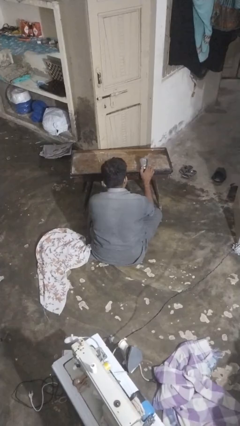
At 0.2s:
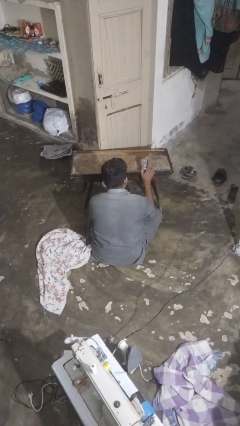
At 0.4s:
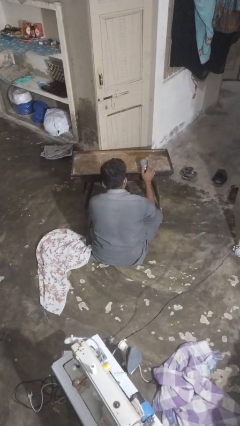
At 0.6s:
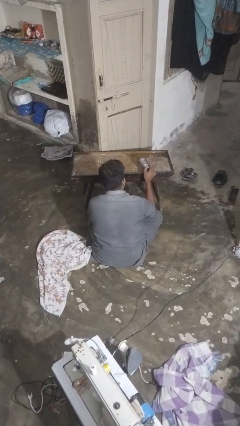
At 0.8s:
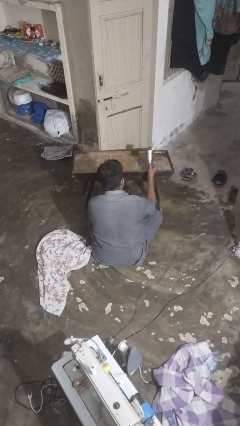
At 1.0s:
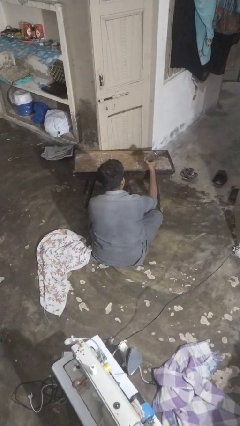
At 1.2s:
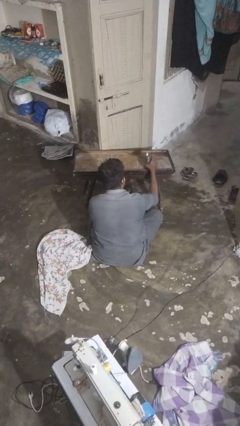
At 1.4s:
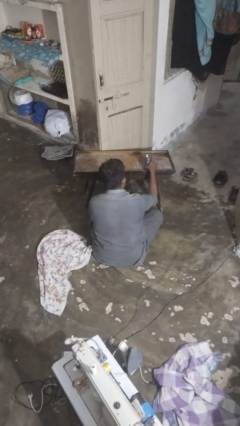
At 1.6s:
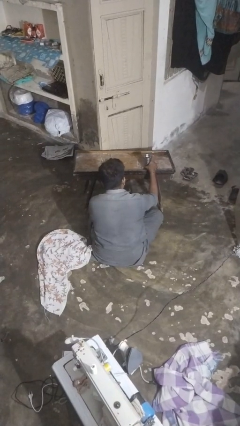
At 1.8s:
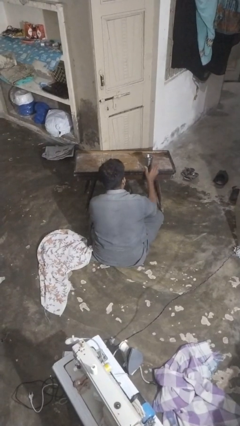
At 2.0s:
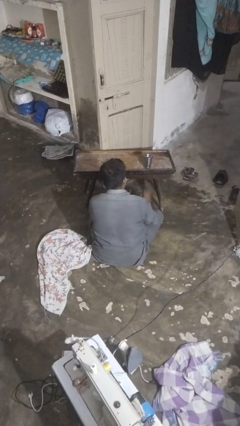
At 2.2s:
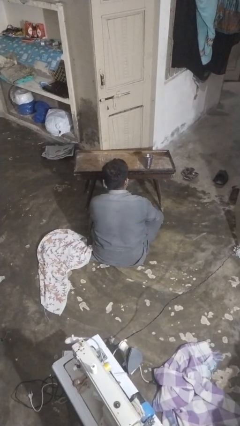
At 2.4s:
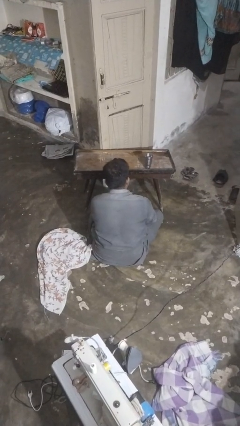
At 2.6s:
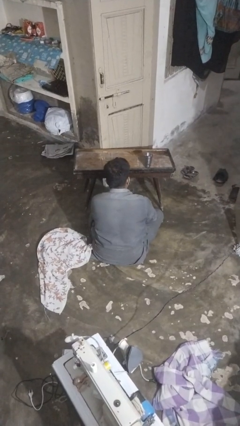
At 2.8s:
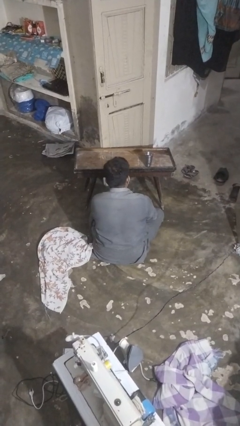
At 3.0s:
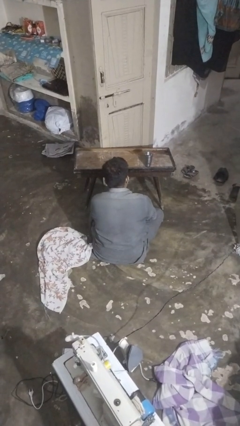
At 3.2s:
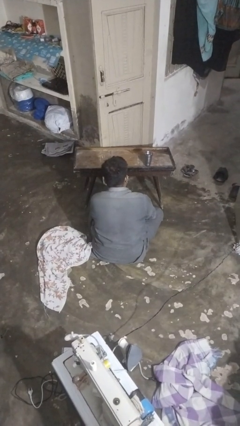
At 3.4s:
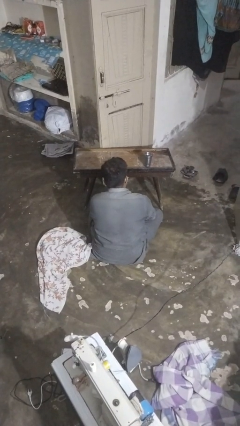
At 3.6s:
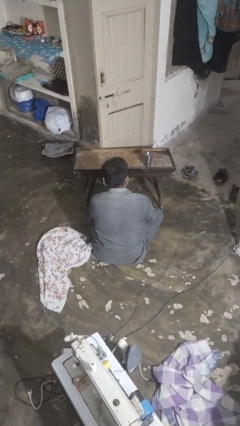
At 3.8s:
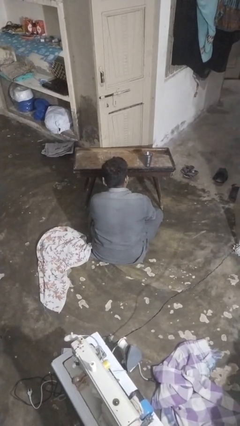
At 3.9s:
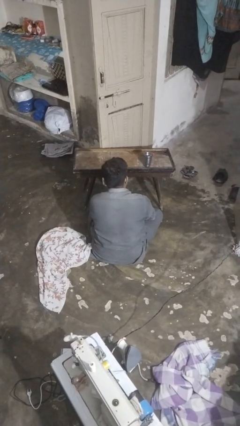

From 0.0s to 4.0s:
person sets upright glass

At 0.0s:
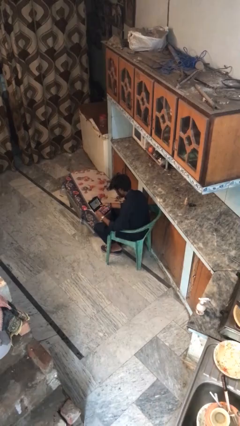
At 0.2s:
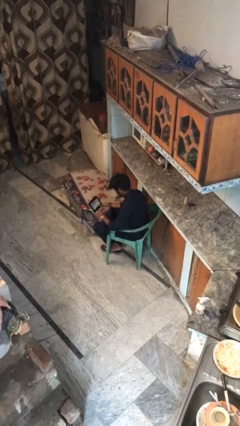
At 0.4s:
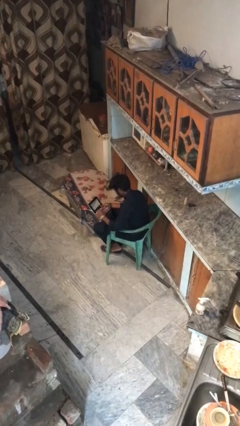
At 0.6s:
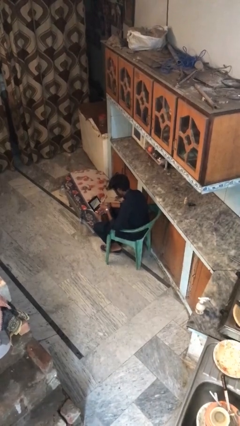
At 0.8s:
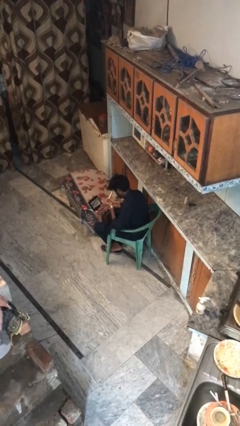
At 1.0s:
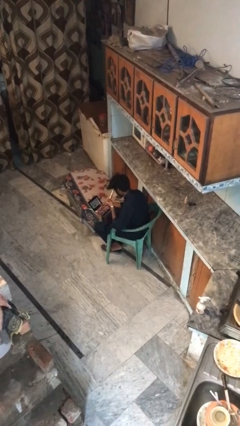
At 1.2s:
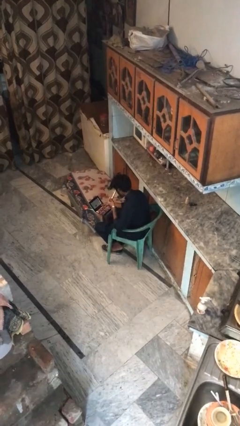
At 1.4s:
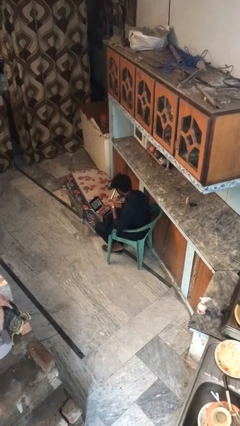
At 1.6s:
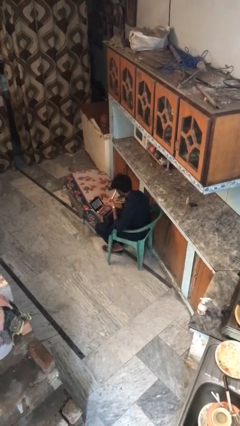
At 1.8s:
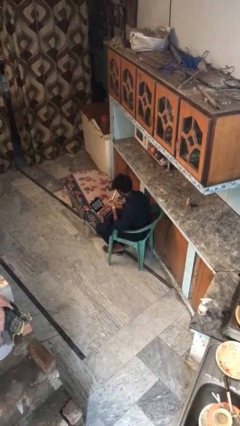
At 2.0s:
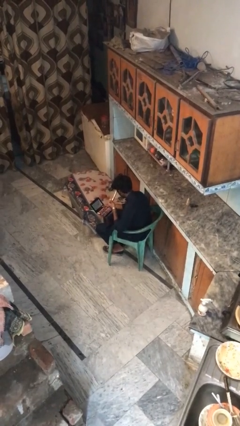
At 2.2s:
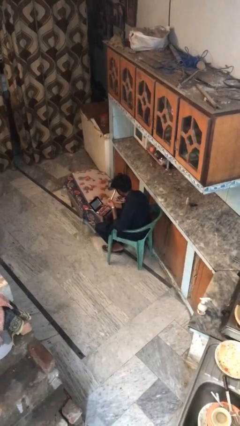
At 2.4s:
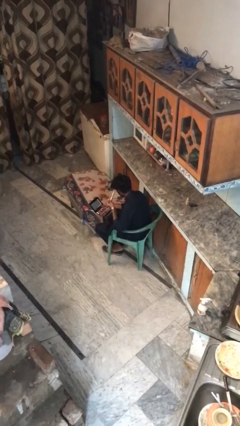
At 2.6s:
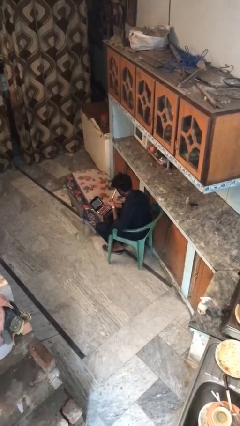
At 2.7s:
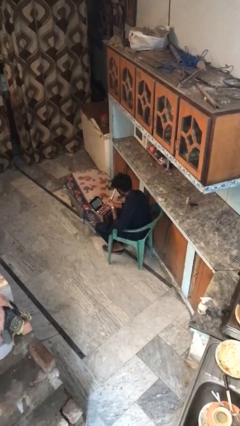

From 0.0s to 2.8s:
person applies eye makeup

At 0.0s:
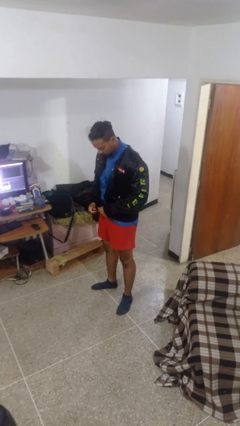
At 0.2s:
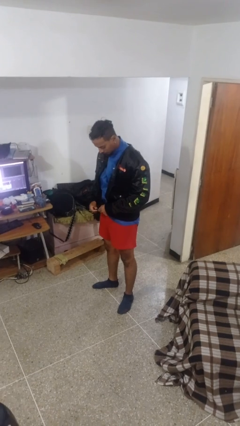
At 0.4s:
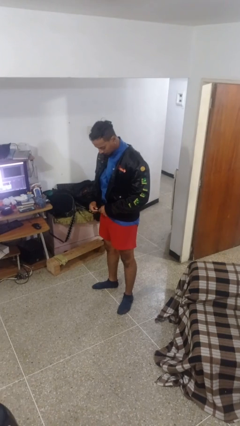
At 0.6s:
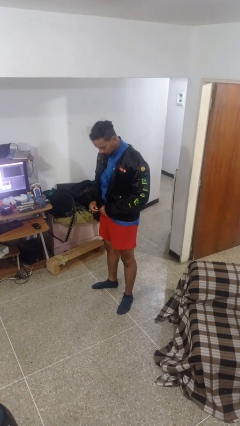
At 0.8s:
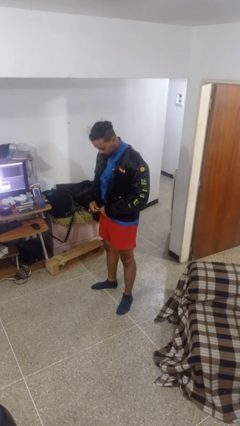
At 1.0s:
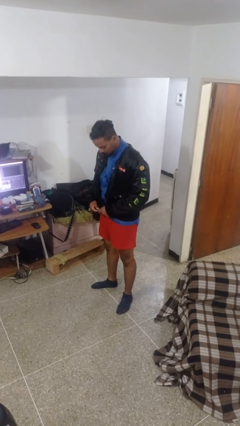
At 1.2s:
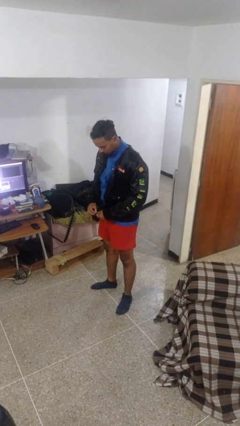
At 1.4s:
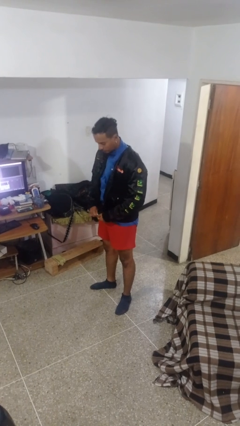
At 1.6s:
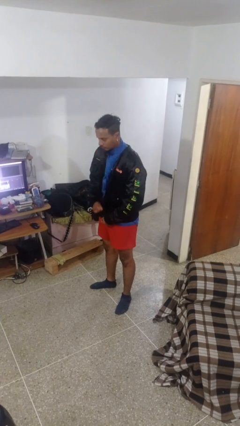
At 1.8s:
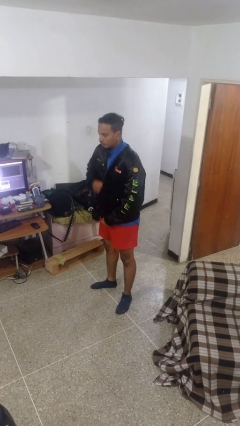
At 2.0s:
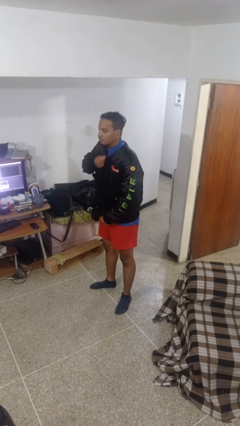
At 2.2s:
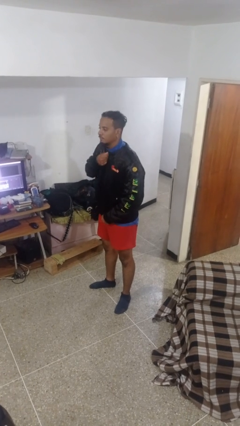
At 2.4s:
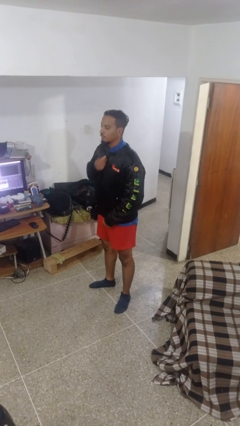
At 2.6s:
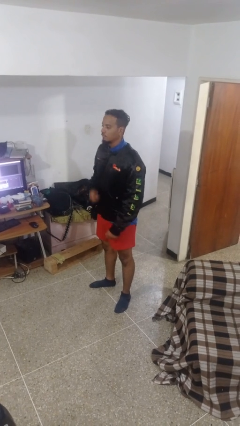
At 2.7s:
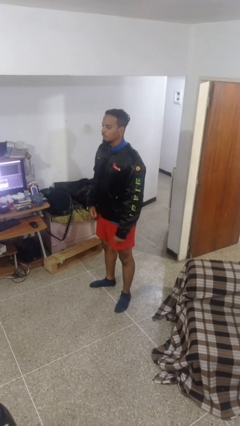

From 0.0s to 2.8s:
person zips up jacket

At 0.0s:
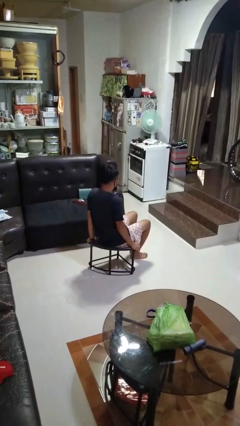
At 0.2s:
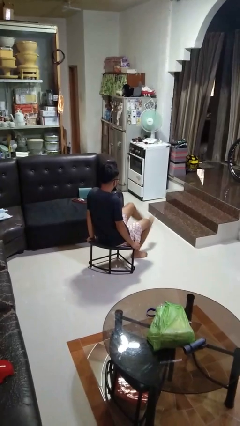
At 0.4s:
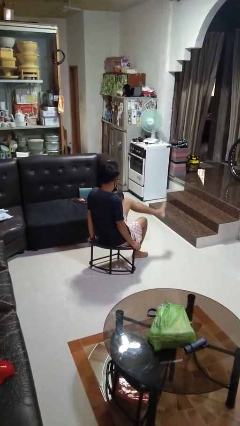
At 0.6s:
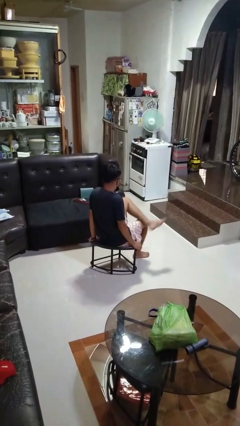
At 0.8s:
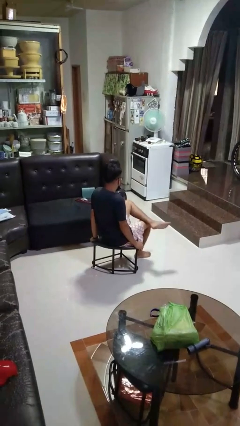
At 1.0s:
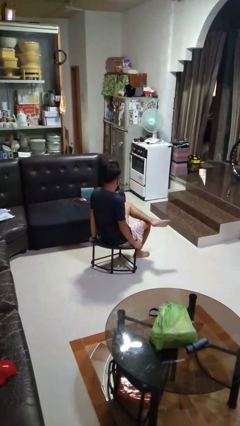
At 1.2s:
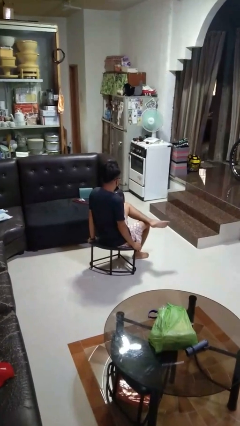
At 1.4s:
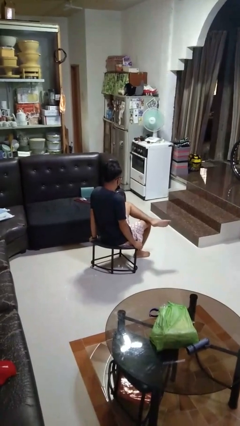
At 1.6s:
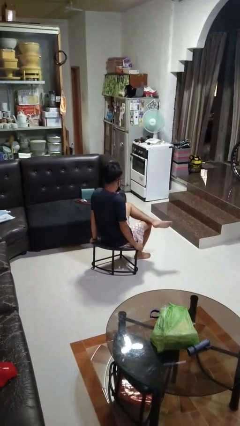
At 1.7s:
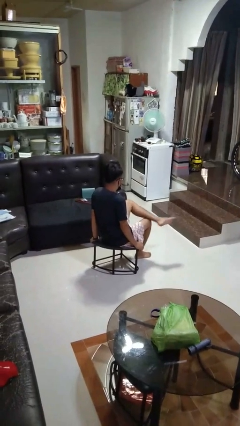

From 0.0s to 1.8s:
person crosses legs

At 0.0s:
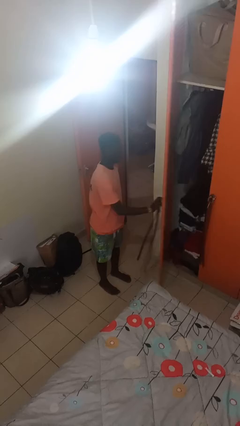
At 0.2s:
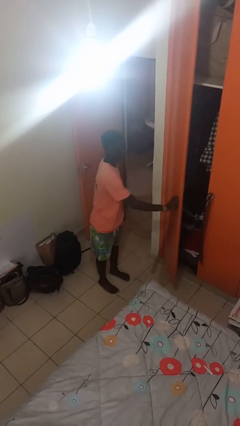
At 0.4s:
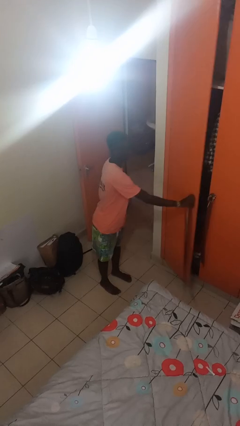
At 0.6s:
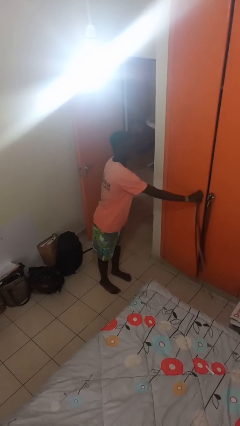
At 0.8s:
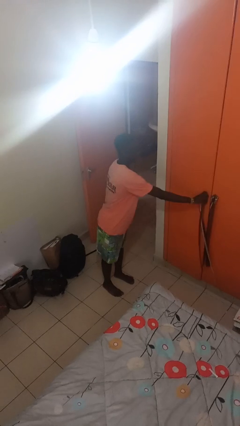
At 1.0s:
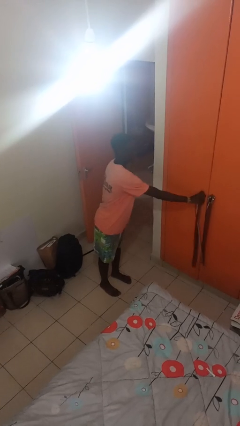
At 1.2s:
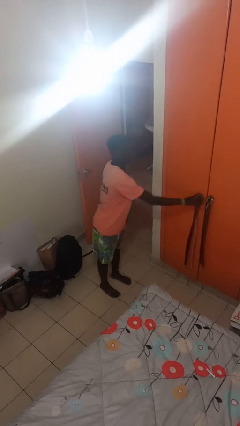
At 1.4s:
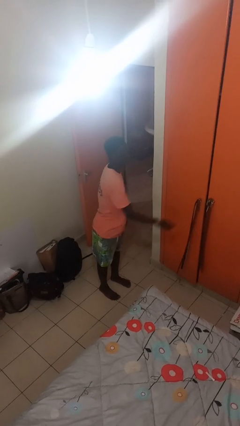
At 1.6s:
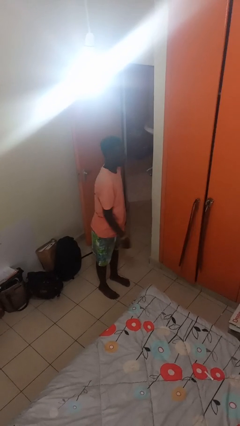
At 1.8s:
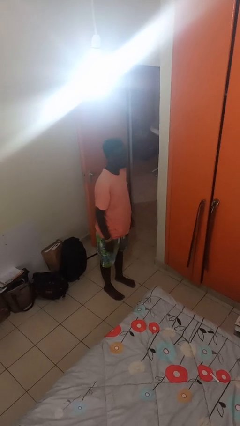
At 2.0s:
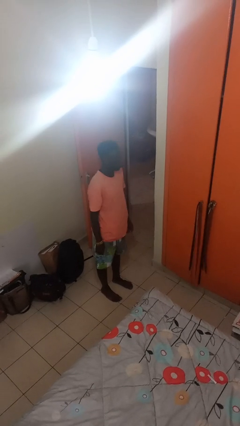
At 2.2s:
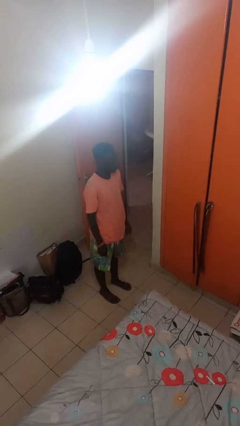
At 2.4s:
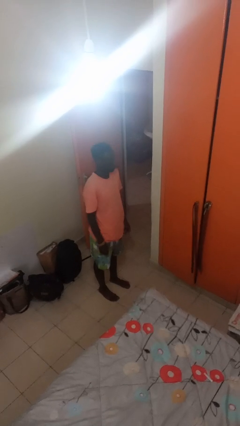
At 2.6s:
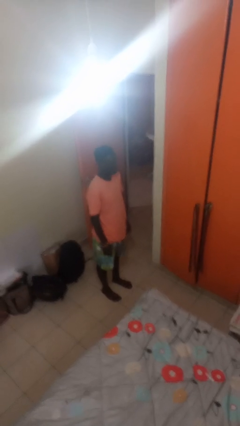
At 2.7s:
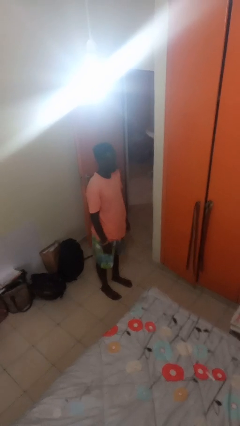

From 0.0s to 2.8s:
person closes closet door

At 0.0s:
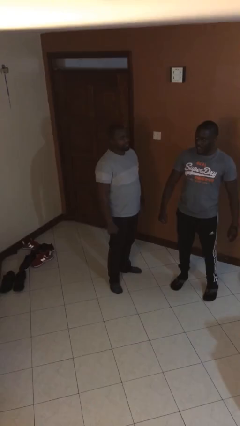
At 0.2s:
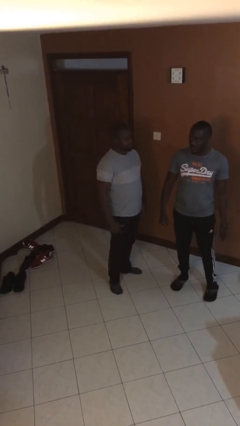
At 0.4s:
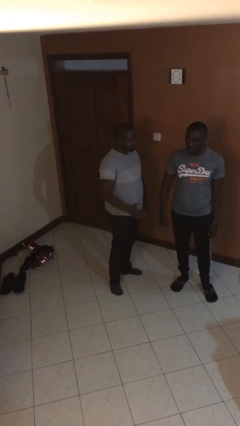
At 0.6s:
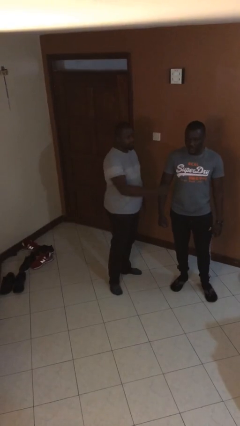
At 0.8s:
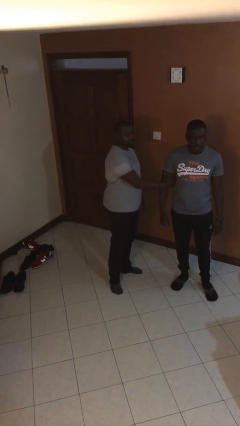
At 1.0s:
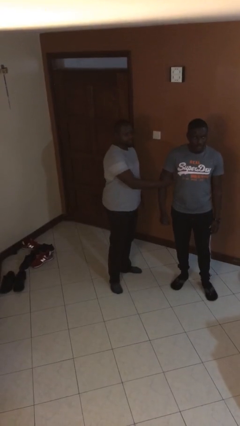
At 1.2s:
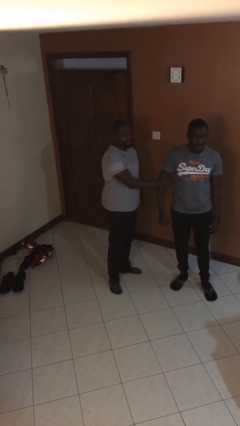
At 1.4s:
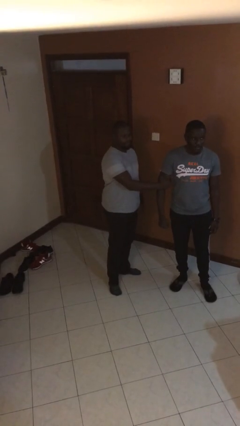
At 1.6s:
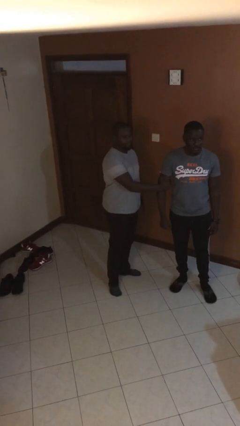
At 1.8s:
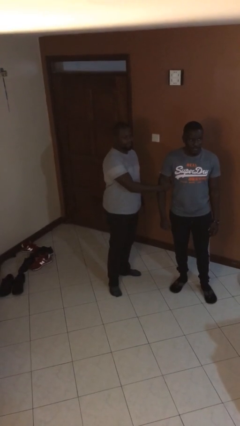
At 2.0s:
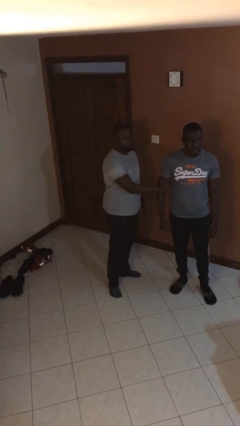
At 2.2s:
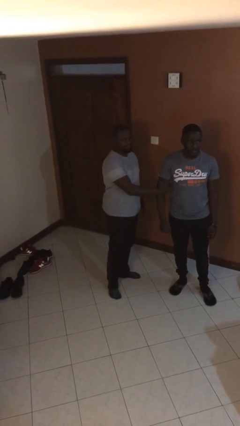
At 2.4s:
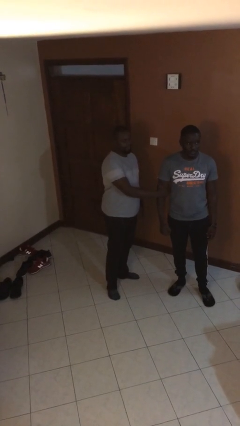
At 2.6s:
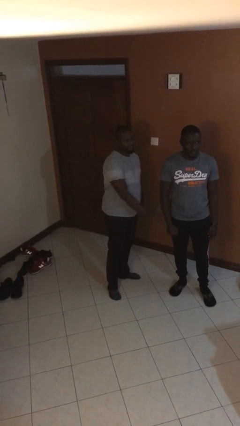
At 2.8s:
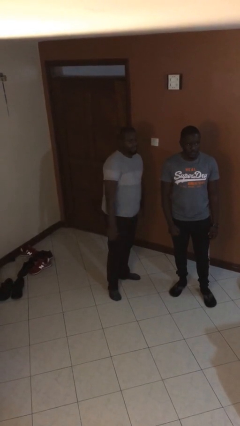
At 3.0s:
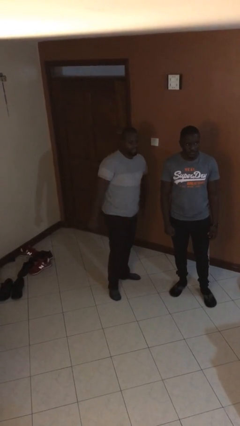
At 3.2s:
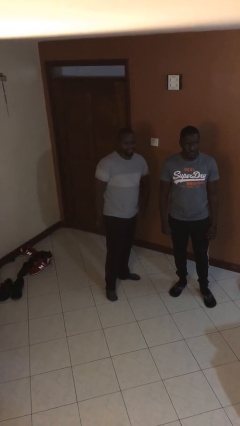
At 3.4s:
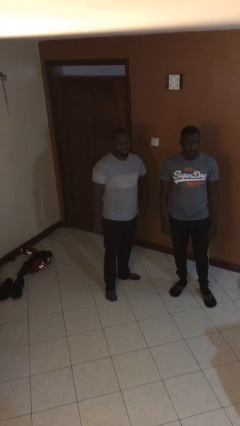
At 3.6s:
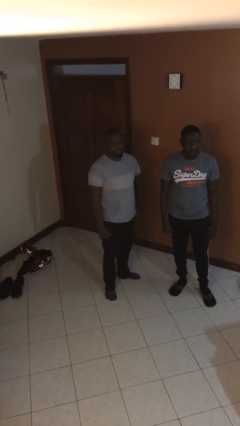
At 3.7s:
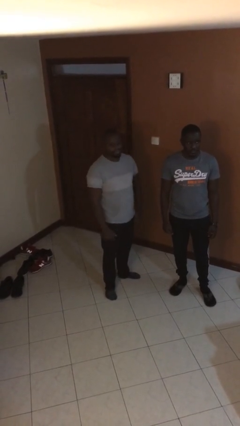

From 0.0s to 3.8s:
person grabs person by bicep
